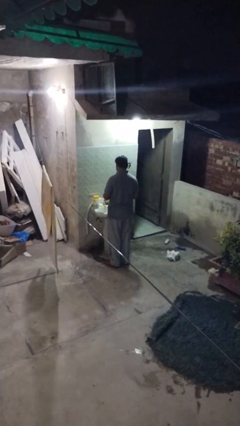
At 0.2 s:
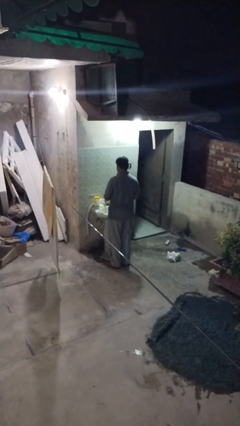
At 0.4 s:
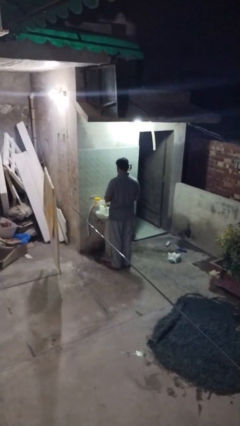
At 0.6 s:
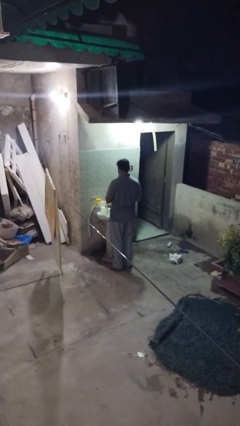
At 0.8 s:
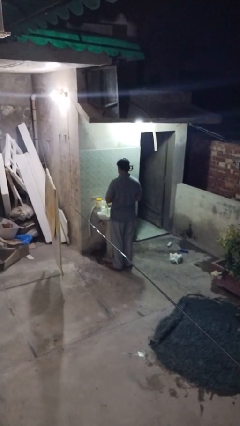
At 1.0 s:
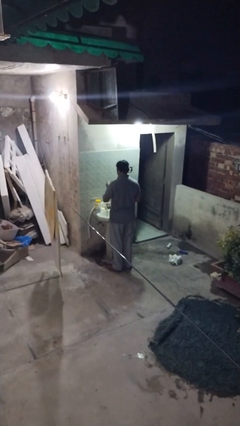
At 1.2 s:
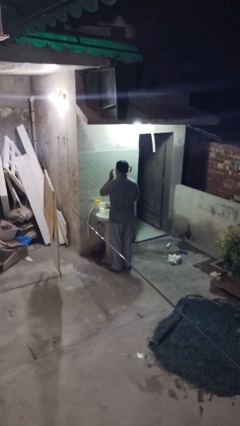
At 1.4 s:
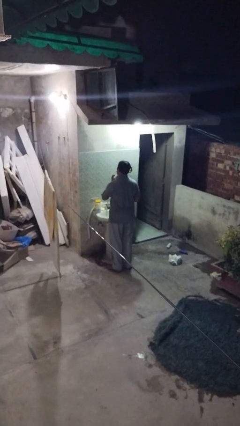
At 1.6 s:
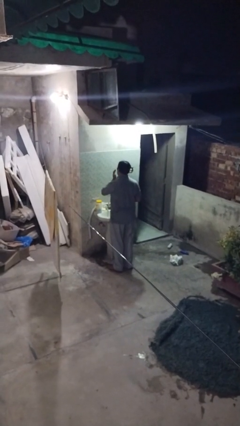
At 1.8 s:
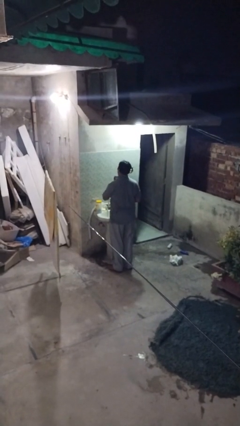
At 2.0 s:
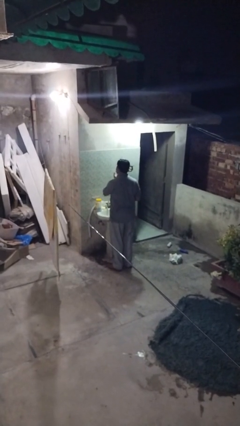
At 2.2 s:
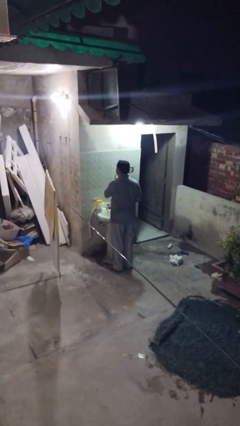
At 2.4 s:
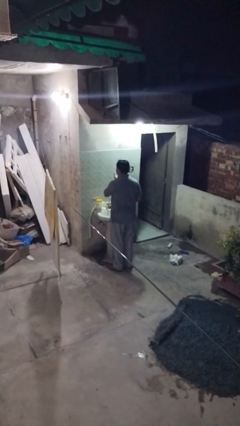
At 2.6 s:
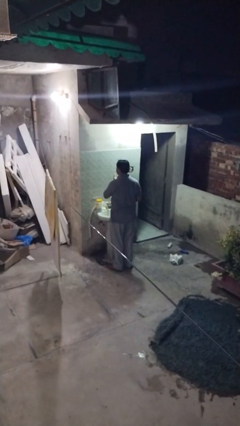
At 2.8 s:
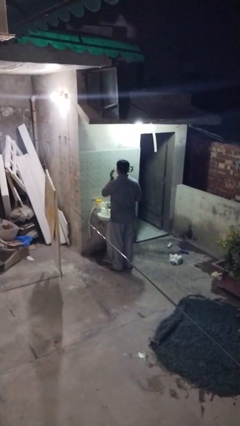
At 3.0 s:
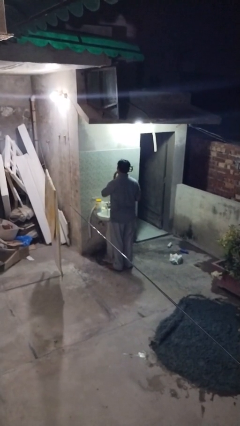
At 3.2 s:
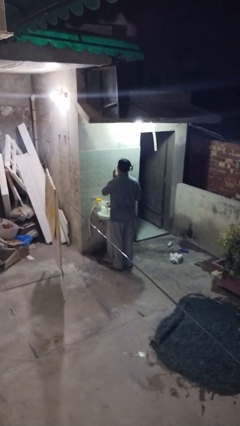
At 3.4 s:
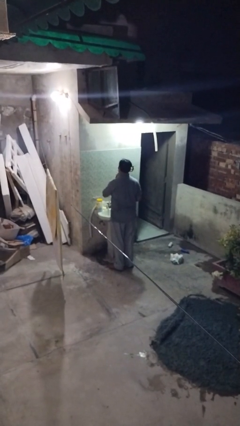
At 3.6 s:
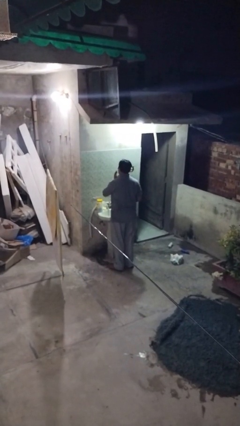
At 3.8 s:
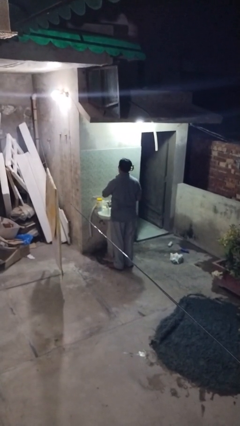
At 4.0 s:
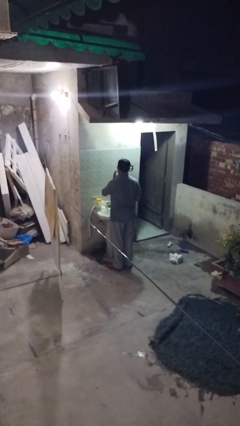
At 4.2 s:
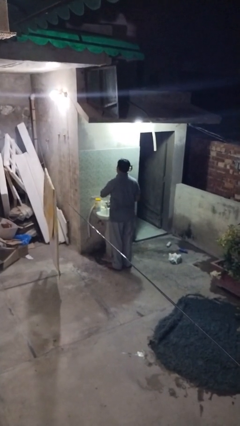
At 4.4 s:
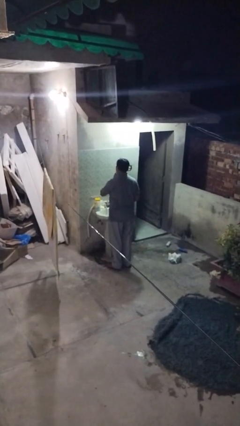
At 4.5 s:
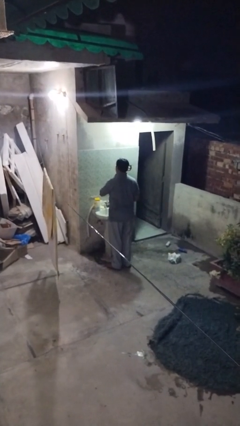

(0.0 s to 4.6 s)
person applies shaving cream

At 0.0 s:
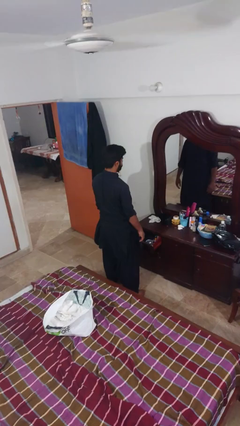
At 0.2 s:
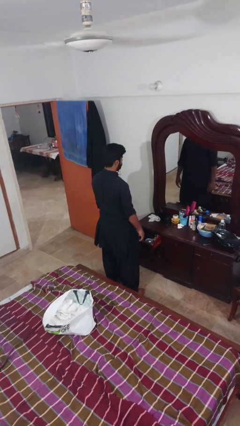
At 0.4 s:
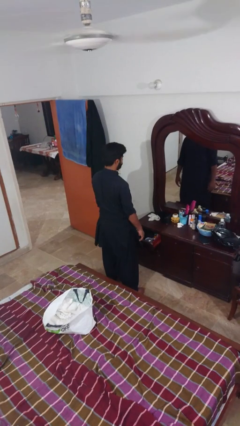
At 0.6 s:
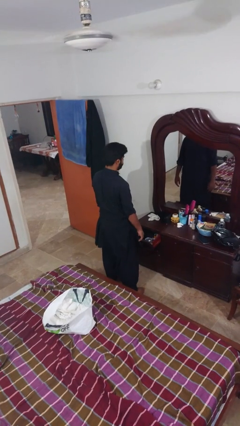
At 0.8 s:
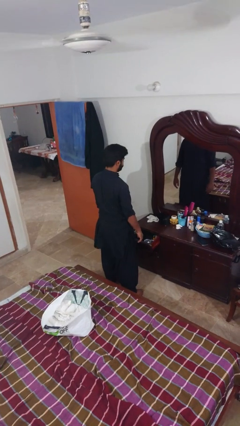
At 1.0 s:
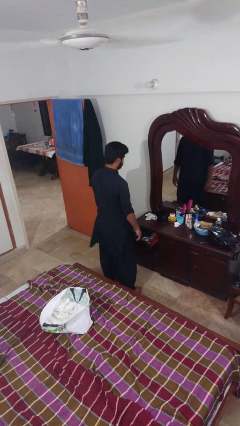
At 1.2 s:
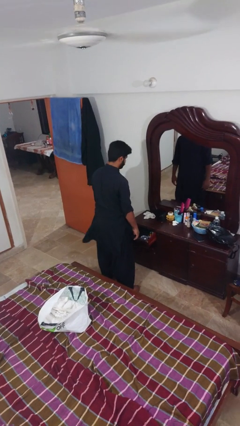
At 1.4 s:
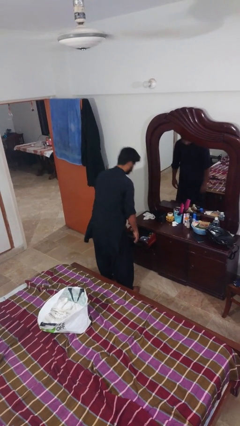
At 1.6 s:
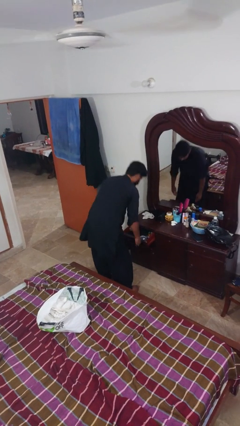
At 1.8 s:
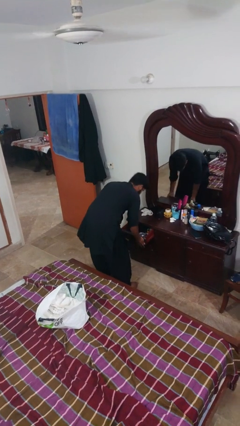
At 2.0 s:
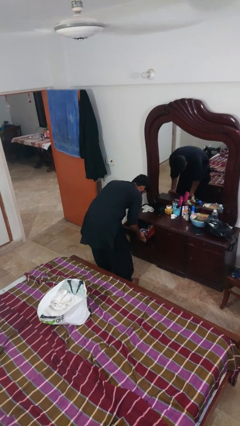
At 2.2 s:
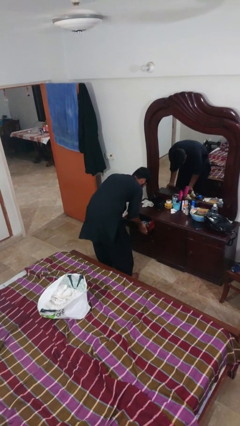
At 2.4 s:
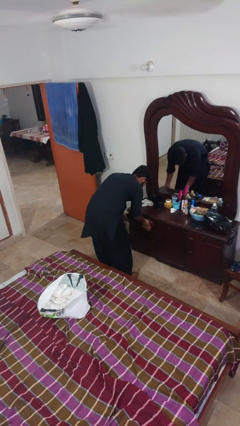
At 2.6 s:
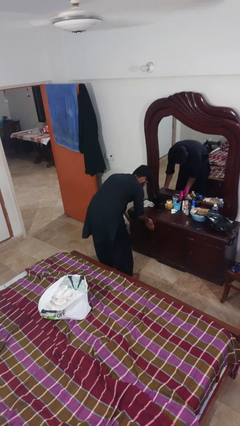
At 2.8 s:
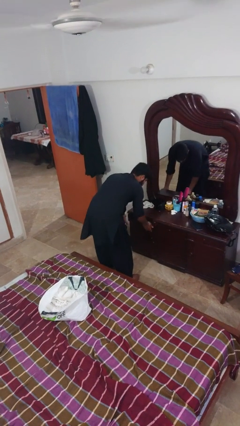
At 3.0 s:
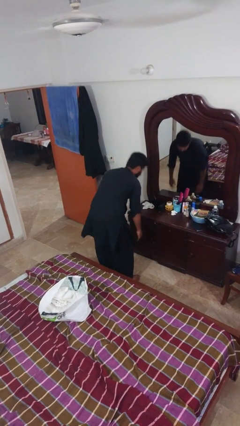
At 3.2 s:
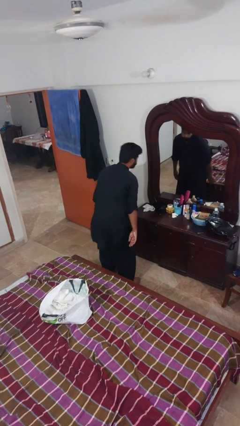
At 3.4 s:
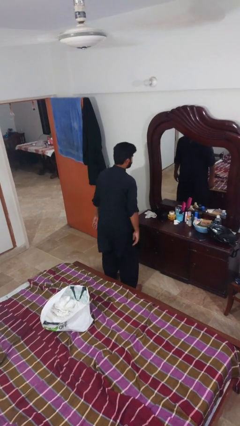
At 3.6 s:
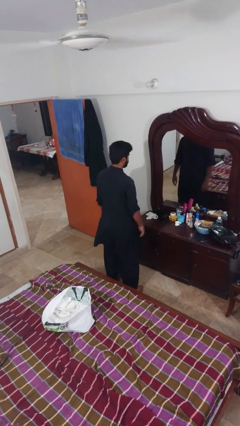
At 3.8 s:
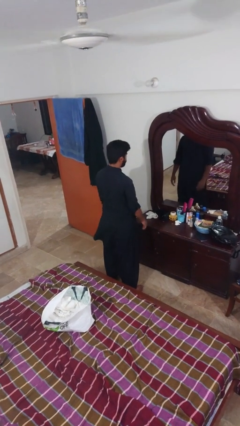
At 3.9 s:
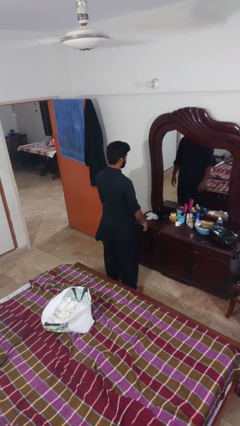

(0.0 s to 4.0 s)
person closes dresser drawer

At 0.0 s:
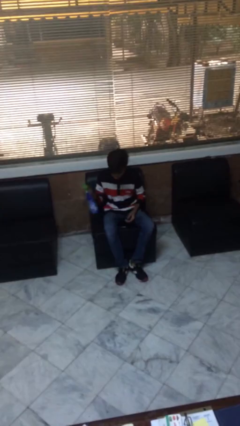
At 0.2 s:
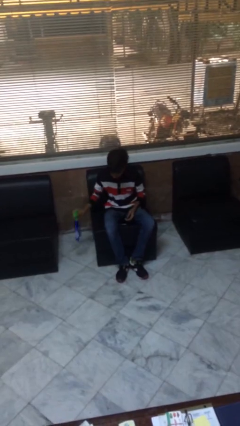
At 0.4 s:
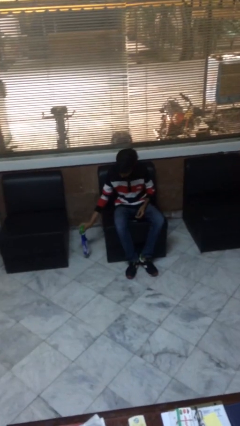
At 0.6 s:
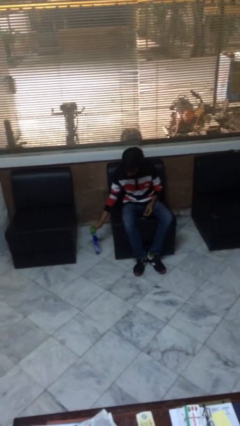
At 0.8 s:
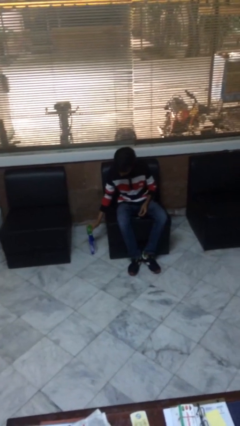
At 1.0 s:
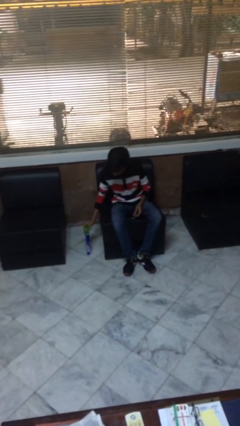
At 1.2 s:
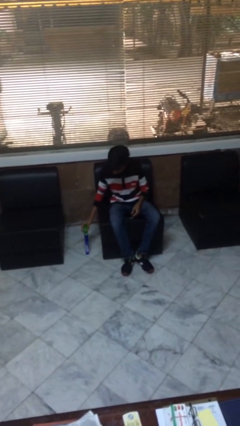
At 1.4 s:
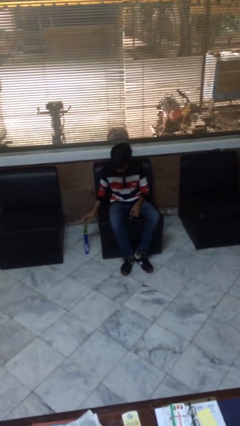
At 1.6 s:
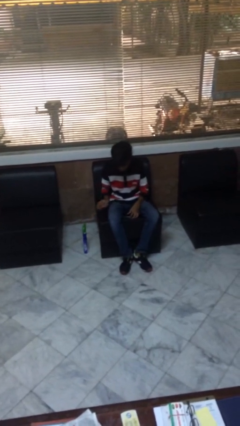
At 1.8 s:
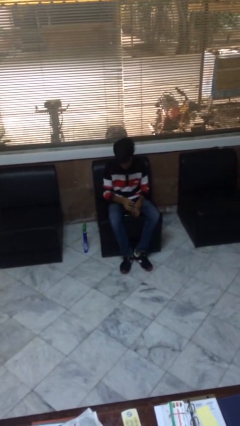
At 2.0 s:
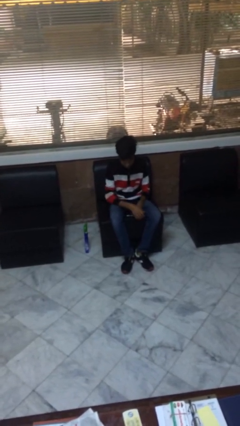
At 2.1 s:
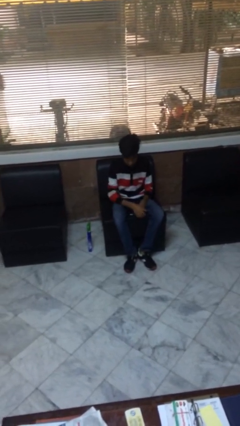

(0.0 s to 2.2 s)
person puts down object on floor

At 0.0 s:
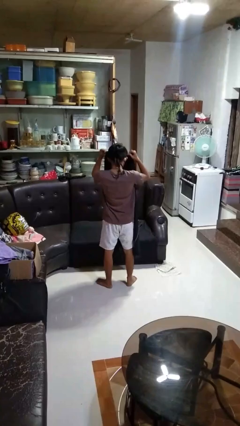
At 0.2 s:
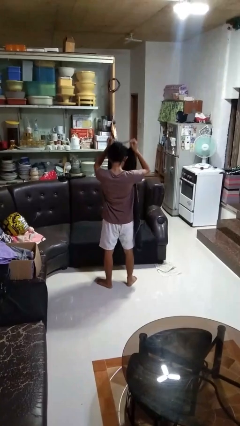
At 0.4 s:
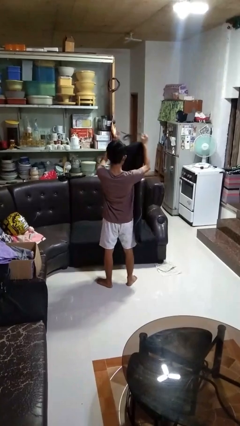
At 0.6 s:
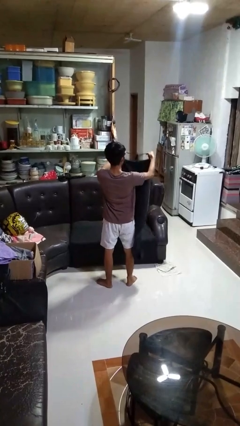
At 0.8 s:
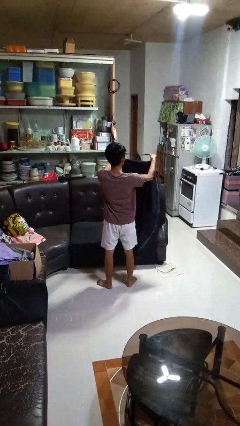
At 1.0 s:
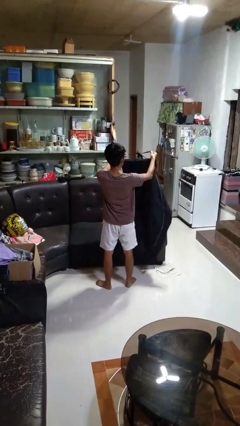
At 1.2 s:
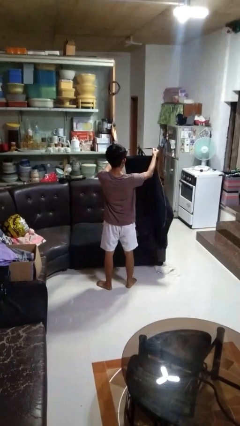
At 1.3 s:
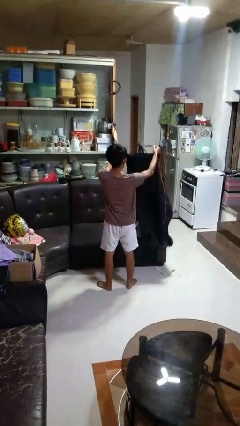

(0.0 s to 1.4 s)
person takes off apron

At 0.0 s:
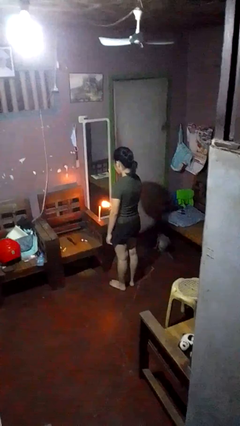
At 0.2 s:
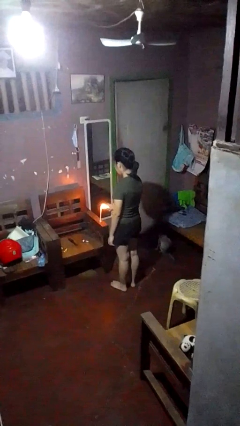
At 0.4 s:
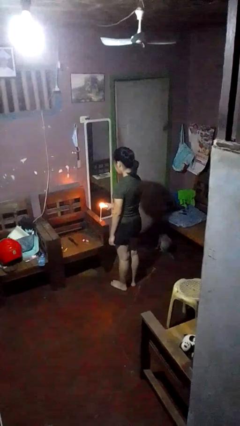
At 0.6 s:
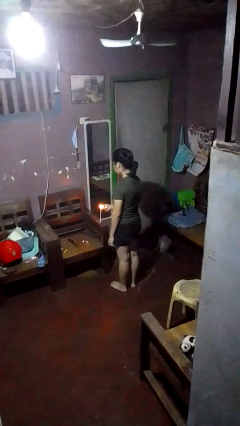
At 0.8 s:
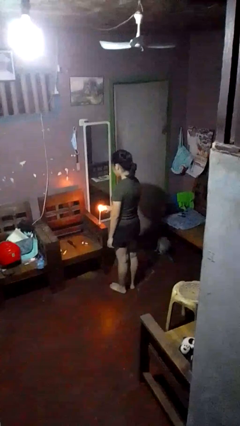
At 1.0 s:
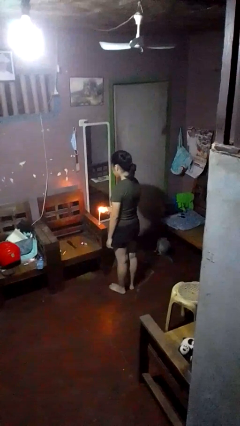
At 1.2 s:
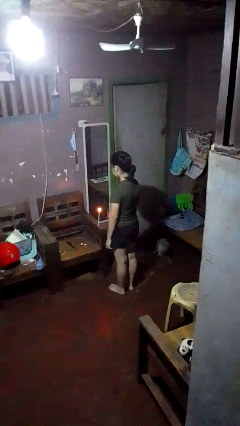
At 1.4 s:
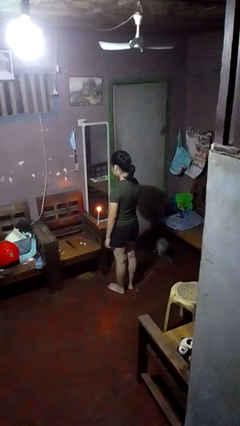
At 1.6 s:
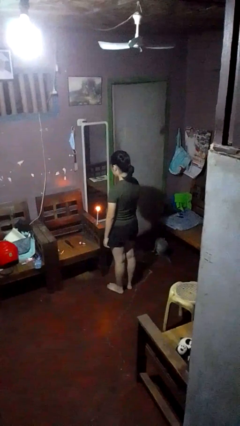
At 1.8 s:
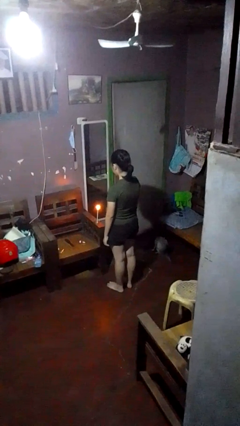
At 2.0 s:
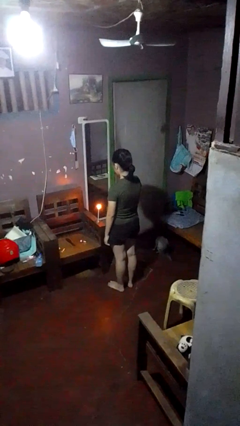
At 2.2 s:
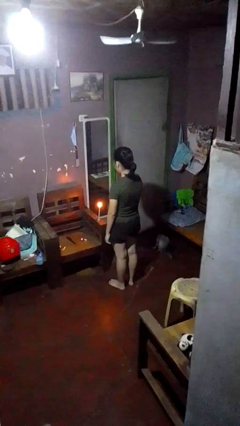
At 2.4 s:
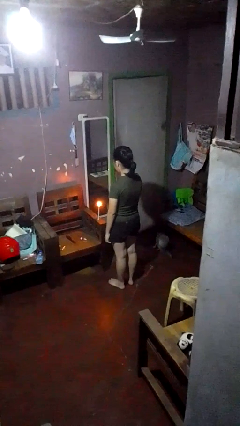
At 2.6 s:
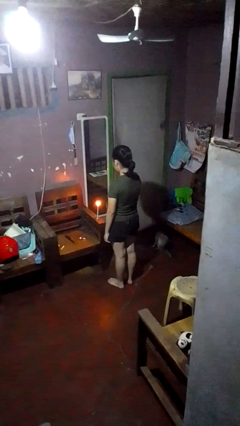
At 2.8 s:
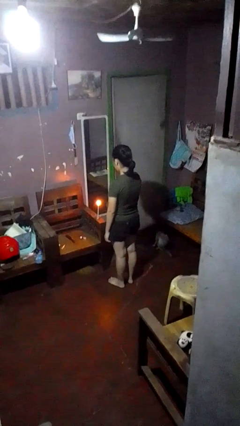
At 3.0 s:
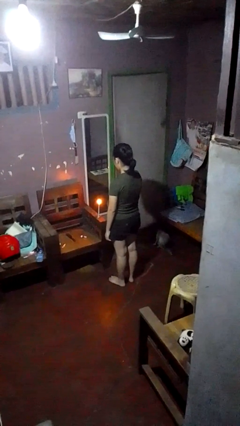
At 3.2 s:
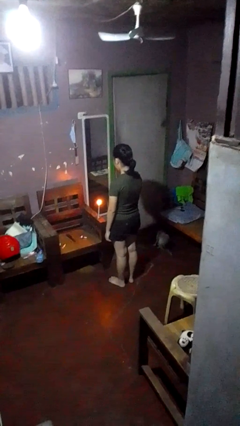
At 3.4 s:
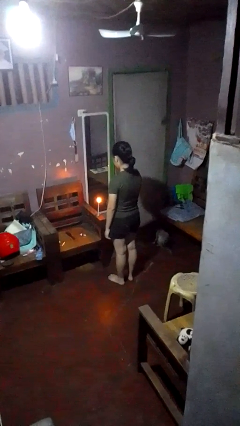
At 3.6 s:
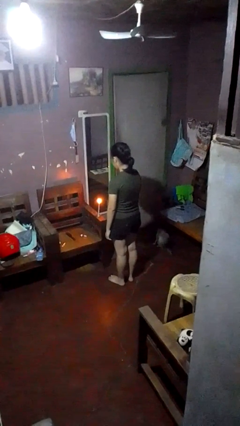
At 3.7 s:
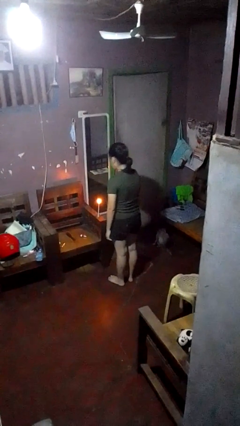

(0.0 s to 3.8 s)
person lights candle

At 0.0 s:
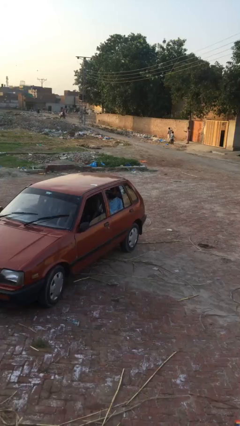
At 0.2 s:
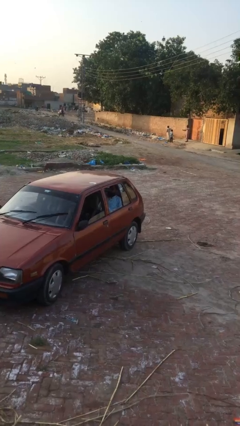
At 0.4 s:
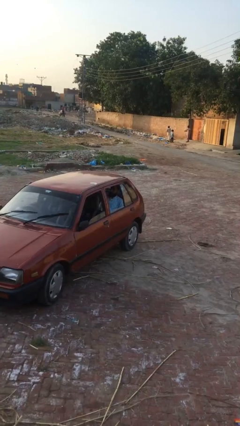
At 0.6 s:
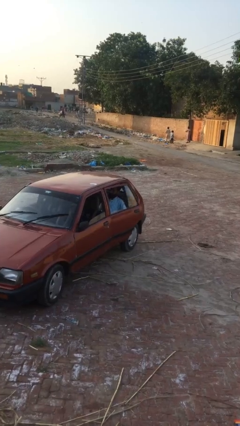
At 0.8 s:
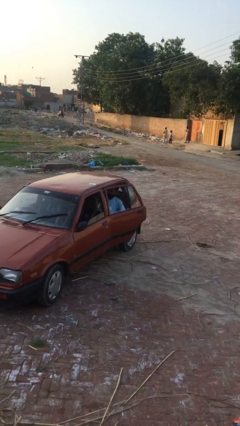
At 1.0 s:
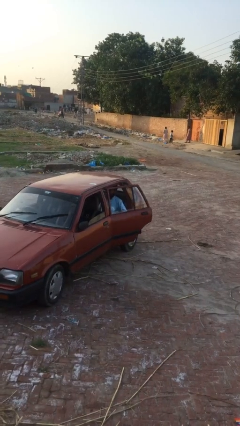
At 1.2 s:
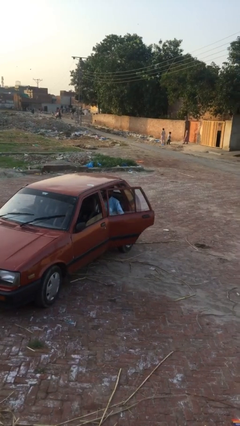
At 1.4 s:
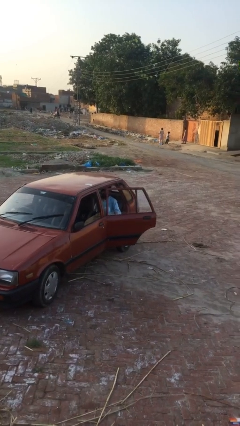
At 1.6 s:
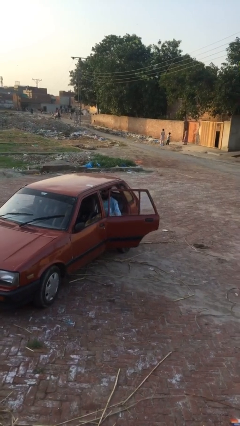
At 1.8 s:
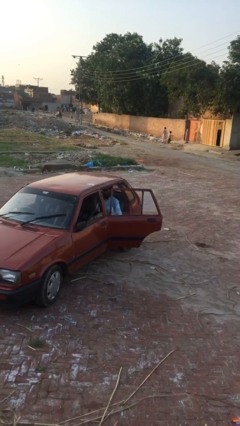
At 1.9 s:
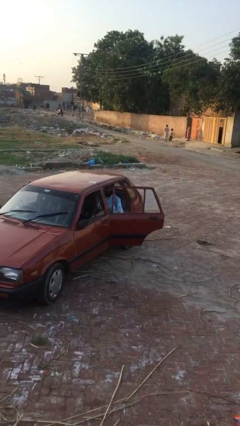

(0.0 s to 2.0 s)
person opens car door
